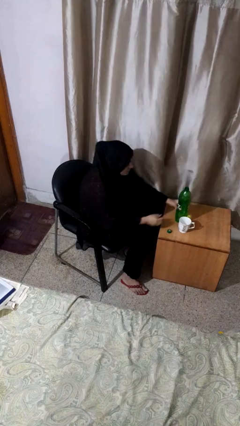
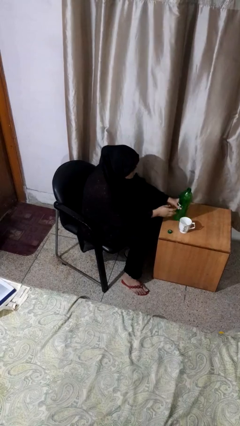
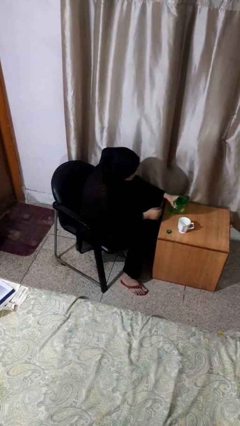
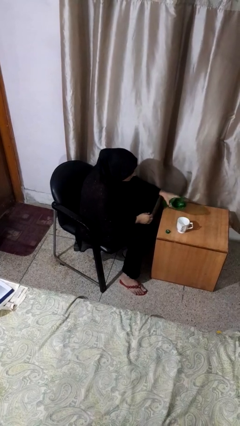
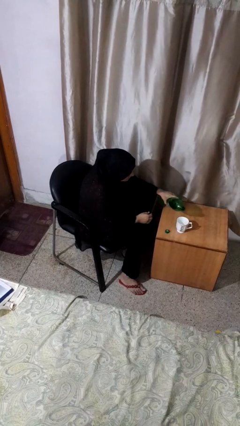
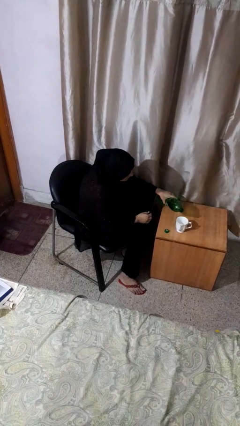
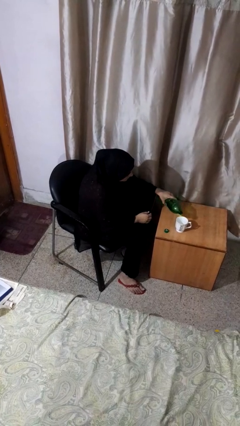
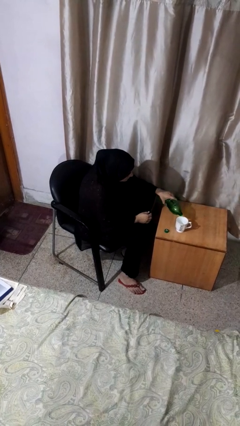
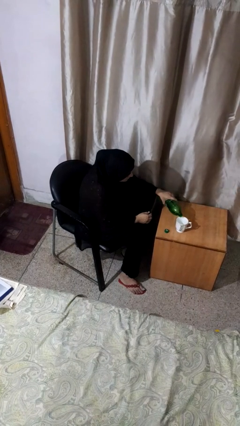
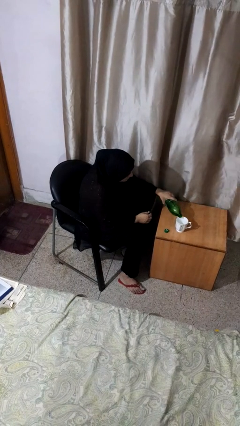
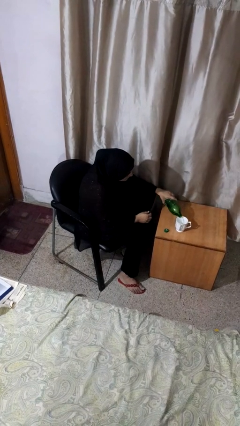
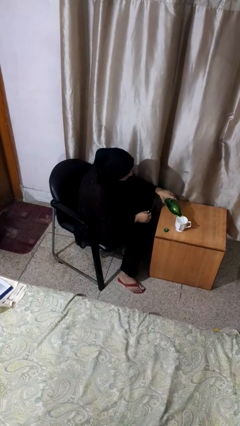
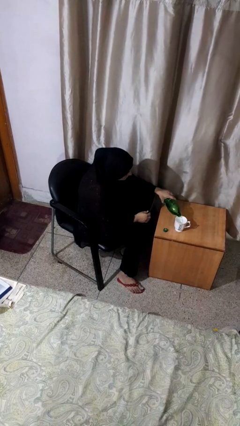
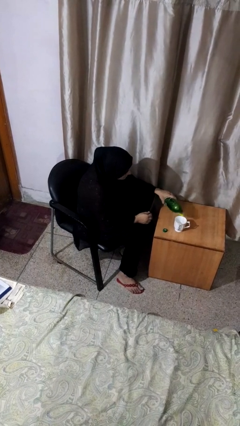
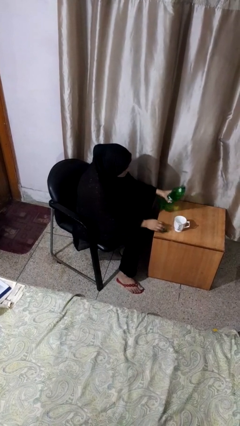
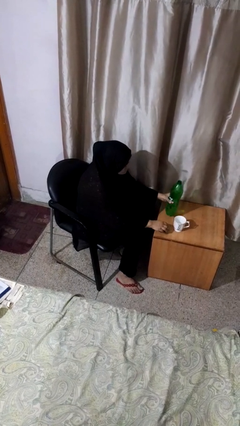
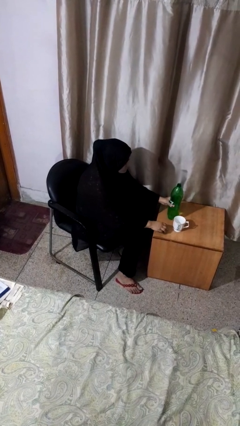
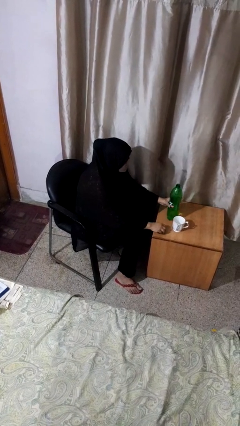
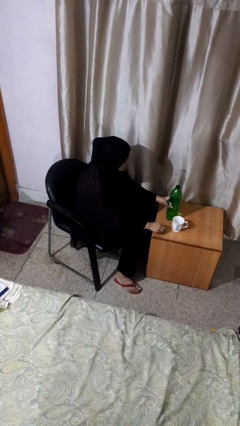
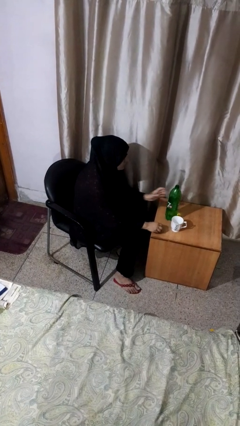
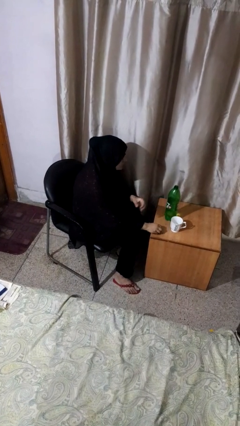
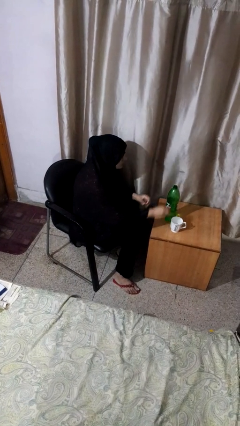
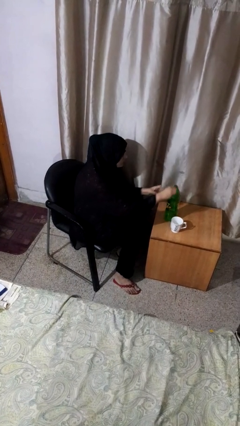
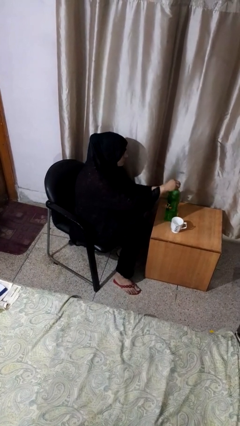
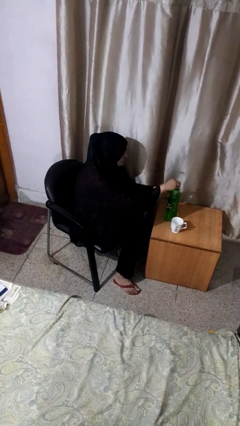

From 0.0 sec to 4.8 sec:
person pours liquid into cup

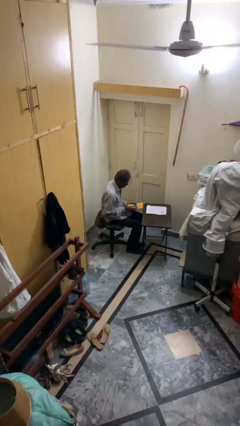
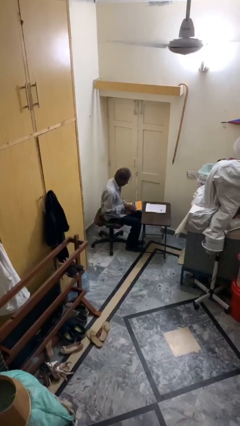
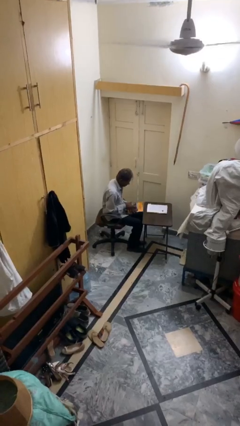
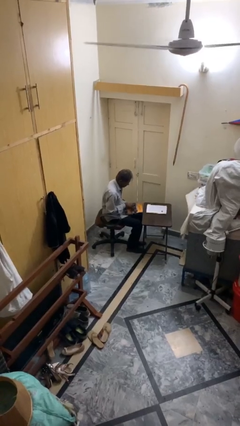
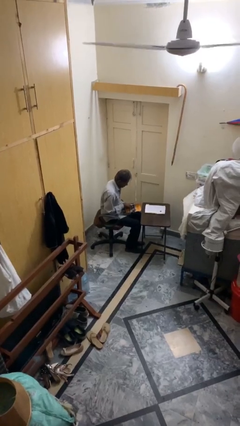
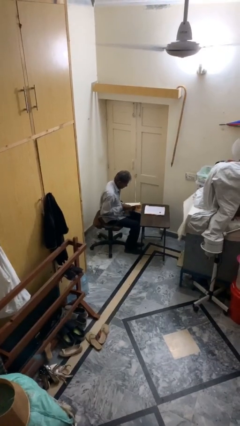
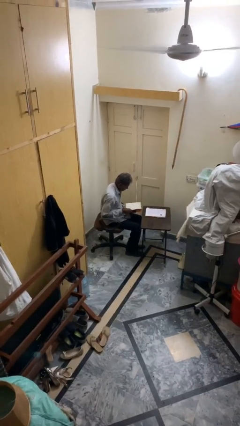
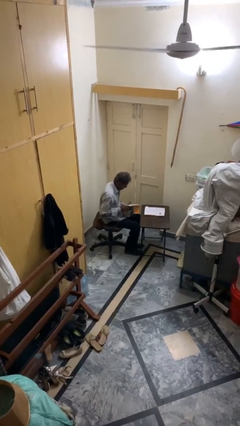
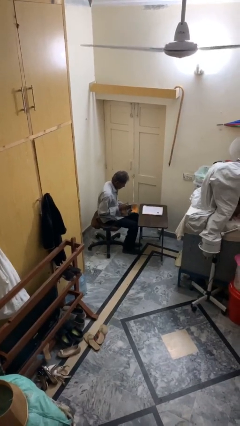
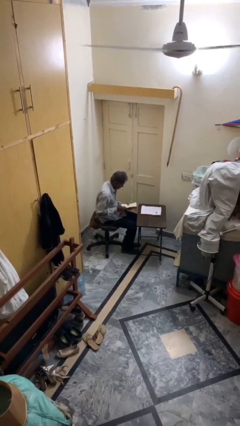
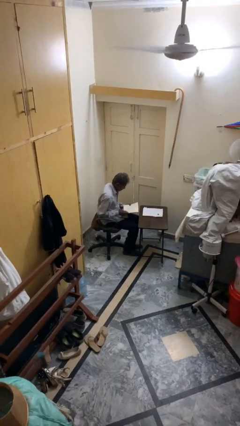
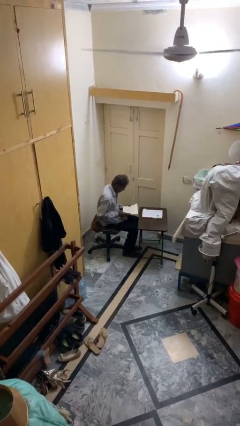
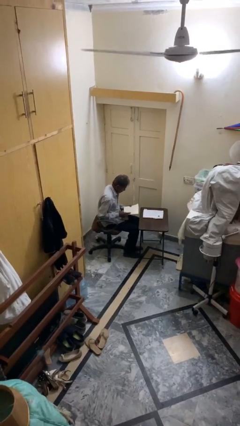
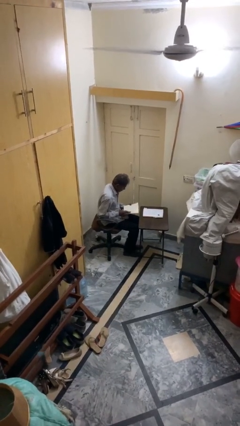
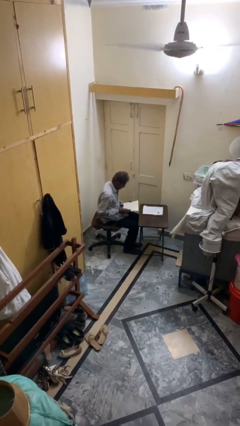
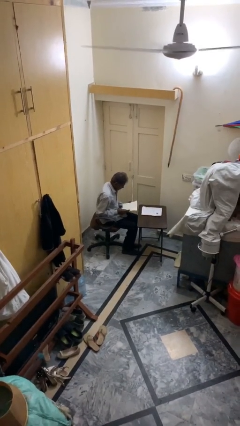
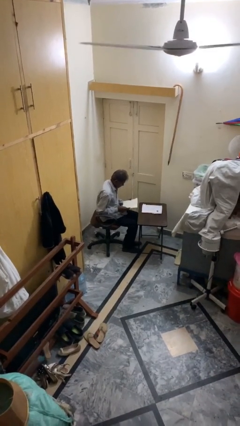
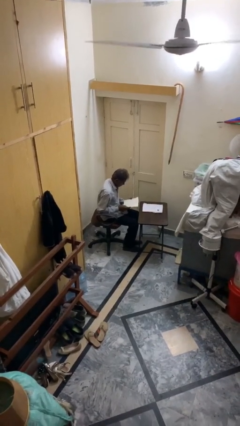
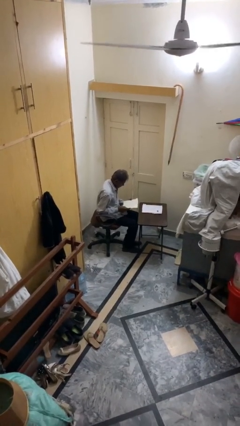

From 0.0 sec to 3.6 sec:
person reads document

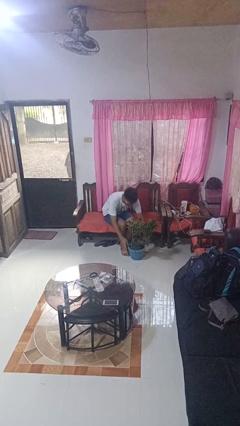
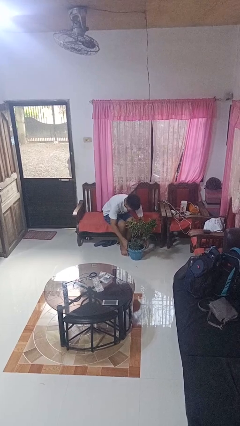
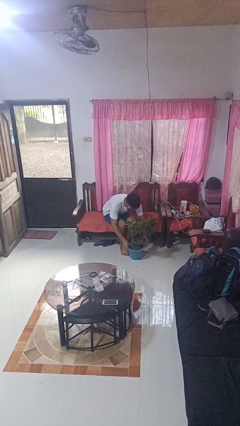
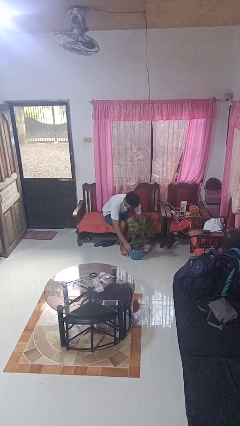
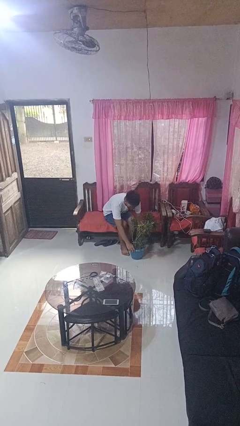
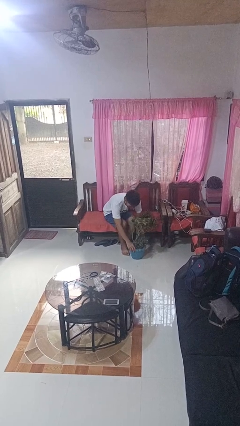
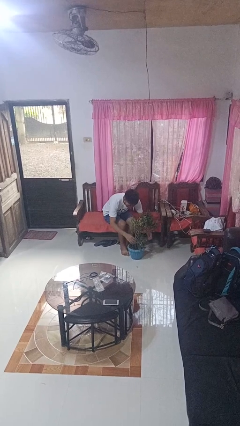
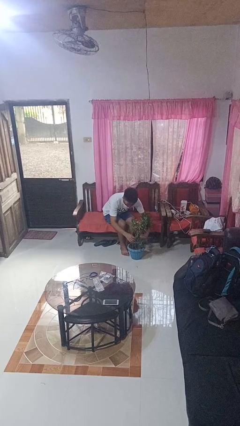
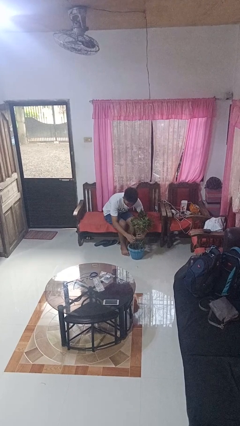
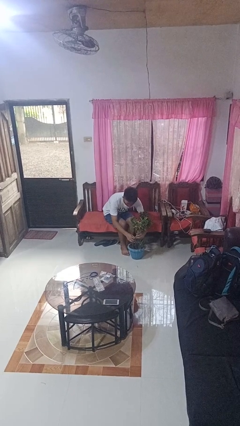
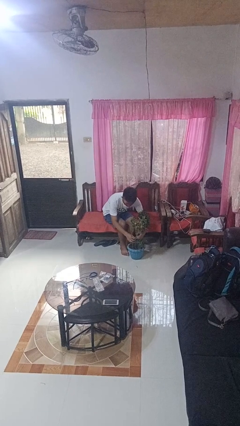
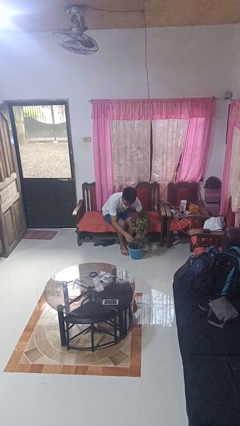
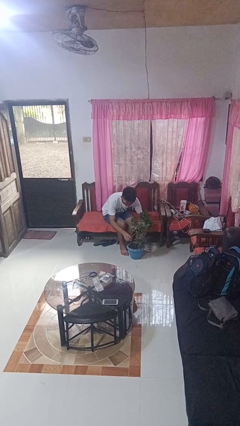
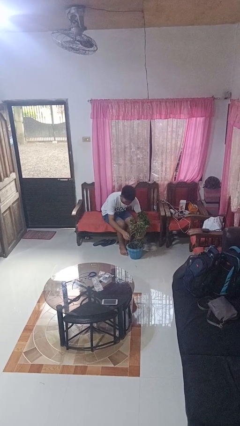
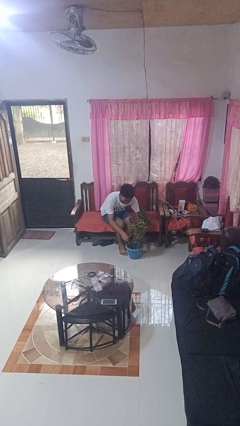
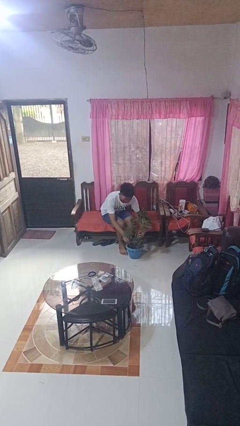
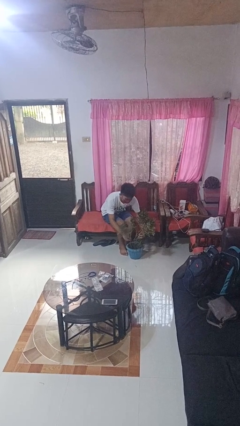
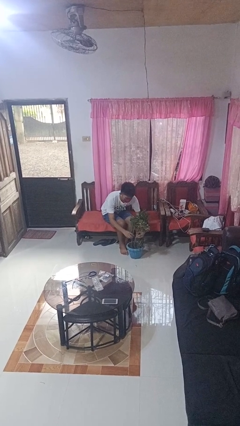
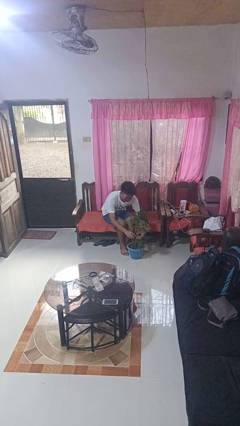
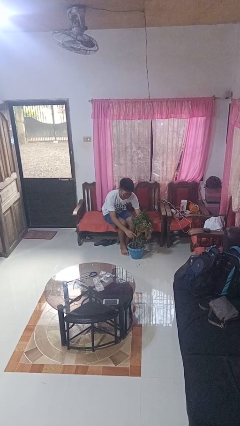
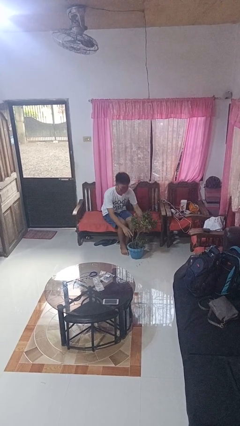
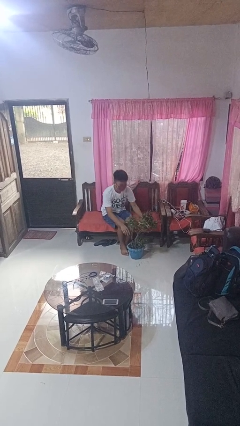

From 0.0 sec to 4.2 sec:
person arranges flowers in vase

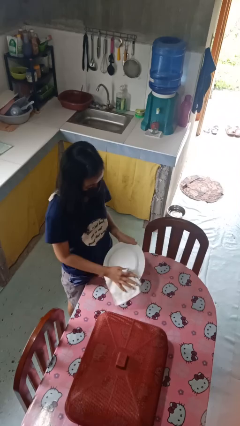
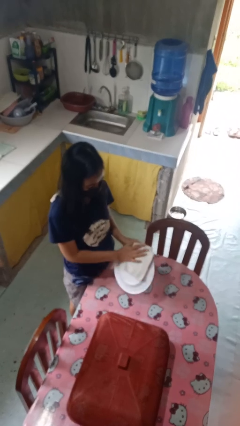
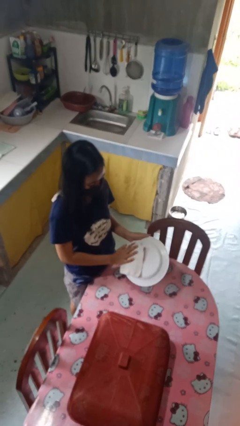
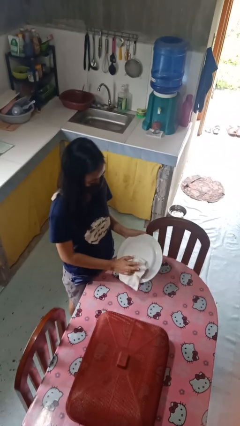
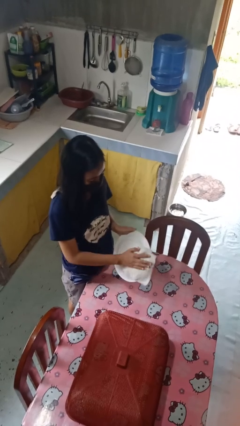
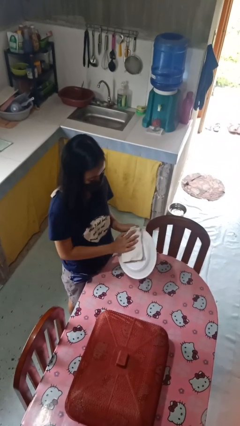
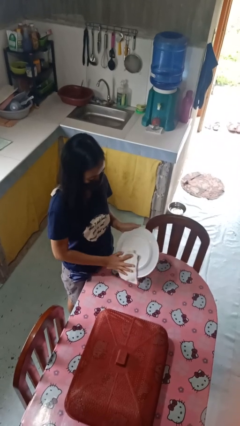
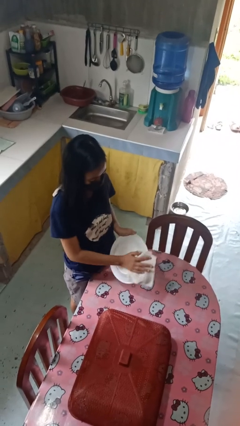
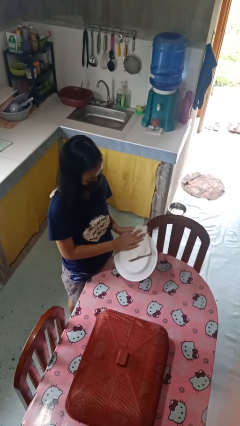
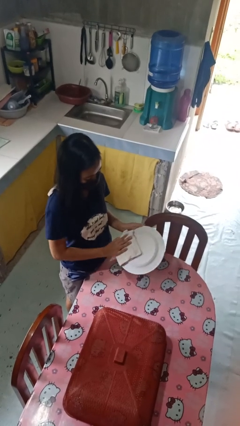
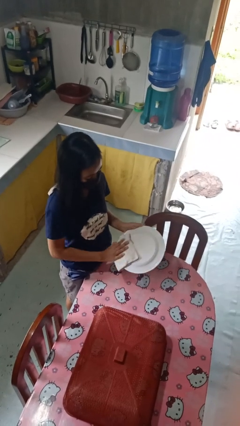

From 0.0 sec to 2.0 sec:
person dries dish

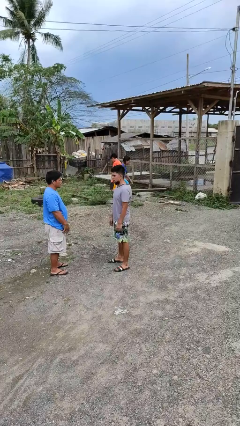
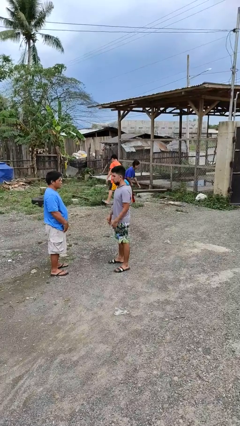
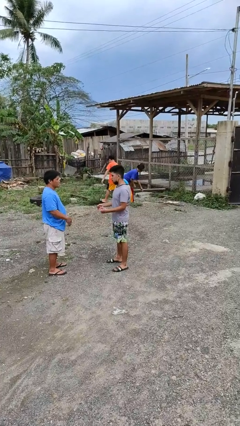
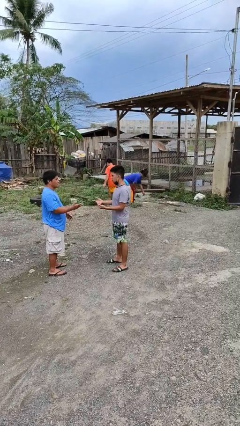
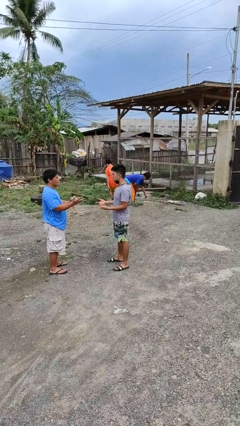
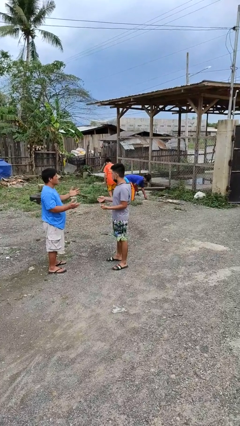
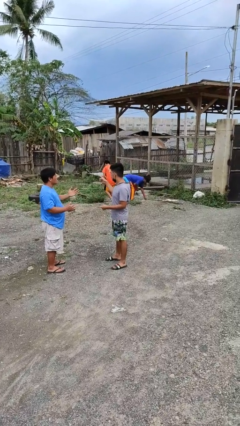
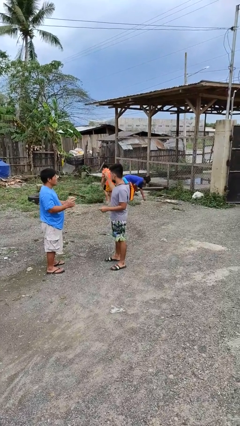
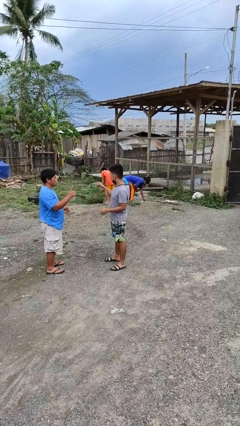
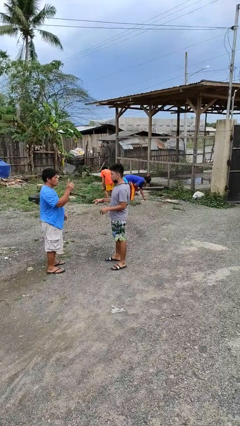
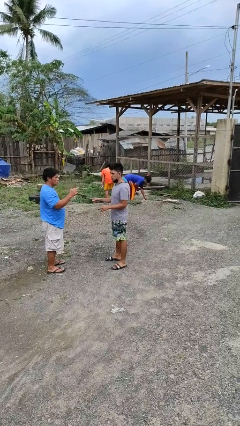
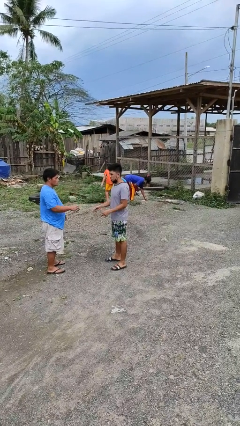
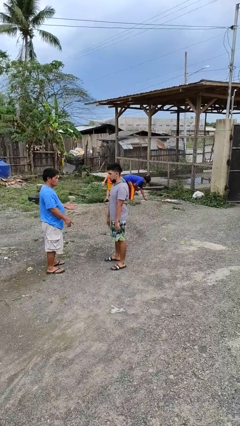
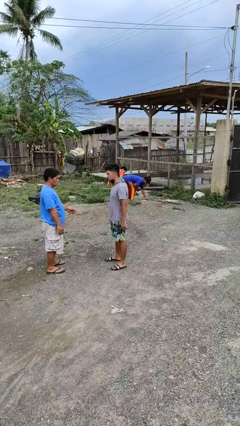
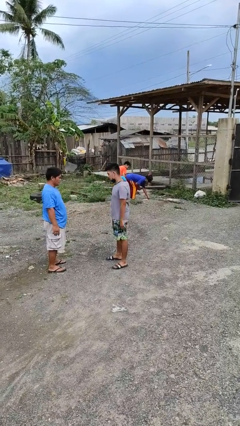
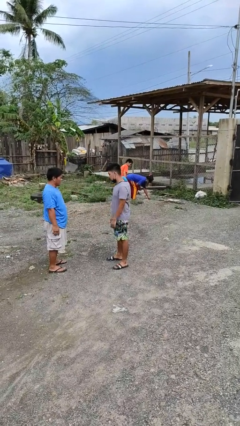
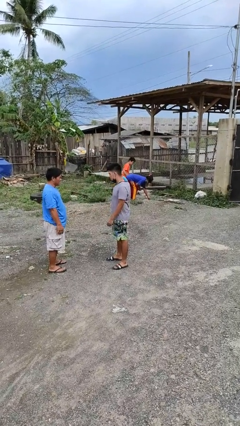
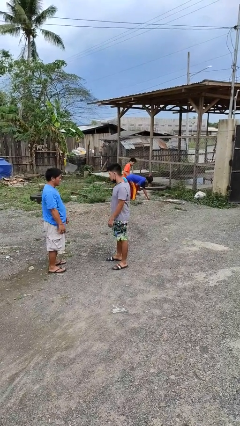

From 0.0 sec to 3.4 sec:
person talks to person
